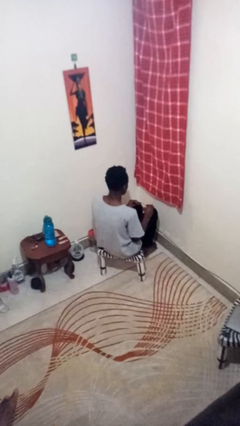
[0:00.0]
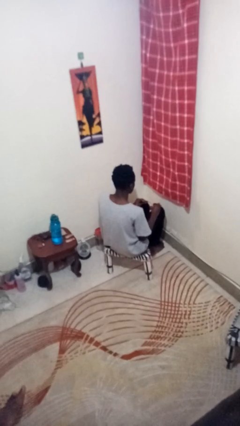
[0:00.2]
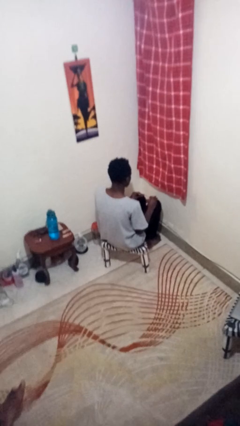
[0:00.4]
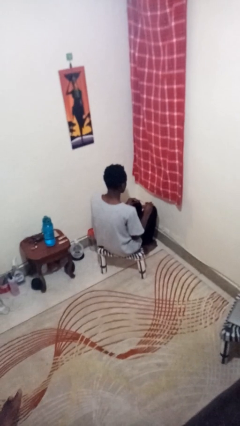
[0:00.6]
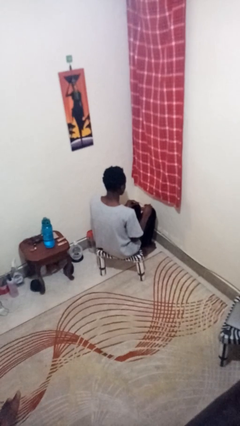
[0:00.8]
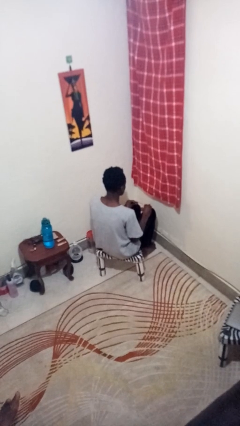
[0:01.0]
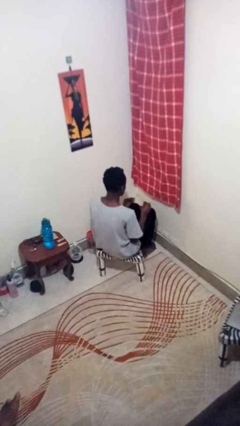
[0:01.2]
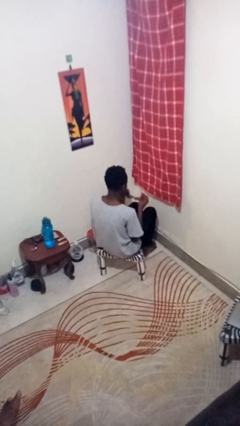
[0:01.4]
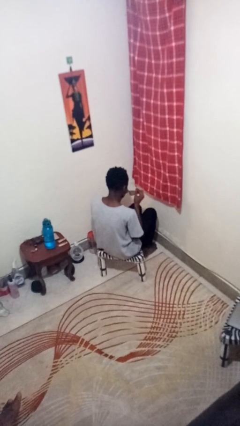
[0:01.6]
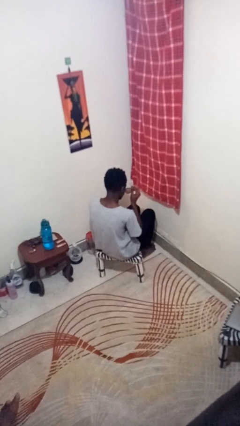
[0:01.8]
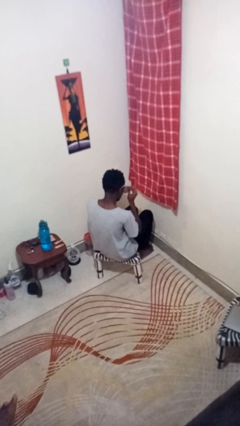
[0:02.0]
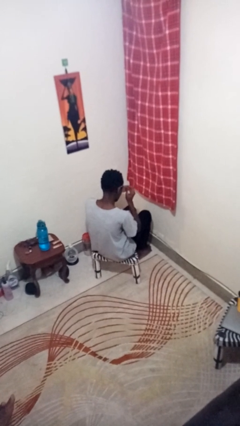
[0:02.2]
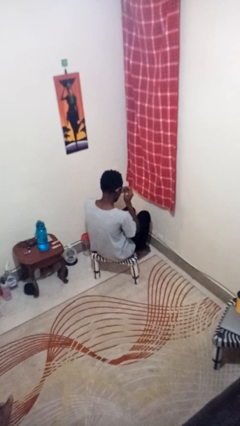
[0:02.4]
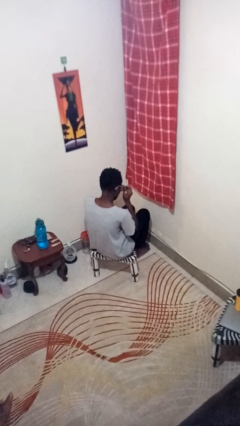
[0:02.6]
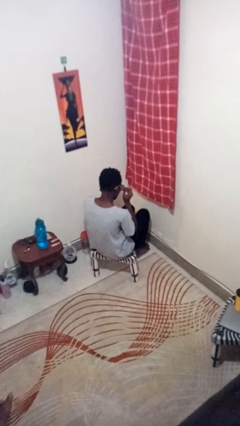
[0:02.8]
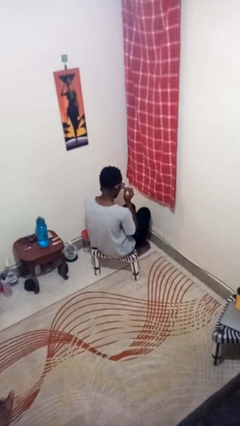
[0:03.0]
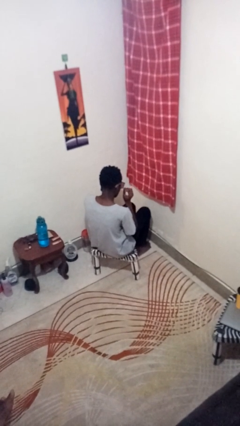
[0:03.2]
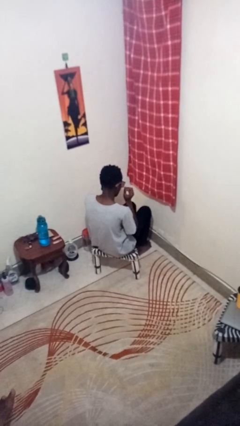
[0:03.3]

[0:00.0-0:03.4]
person puts on glasses

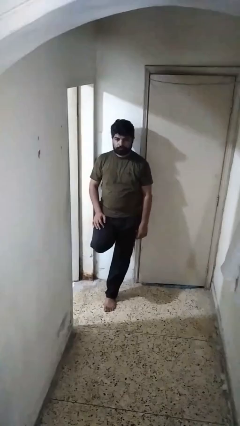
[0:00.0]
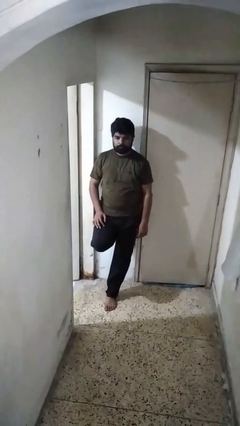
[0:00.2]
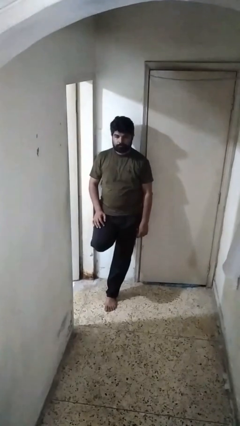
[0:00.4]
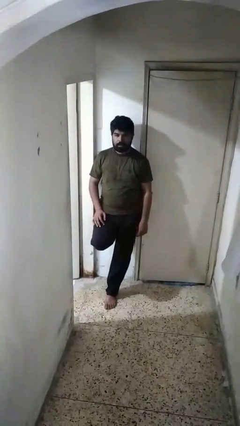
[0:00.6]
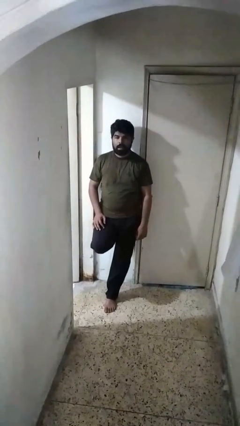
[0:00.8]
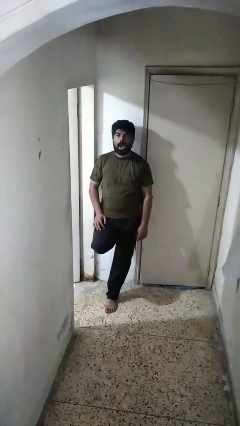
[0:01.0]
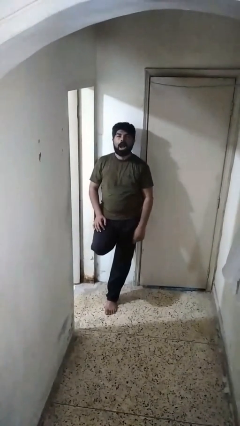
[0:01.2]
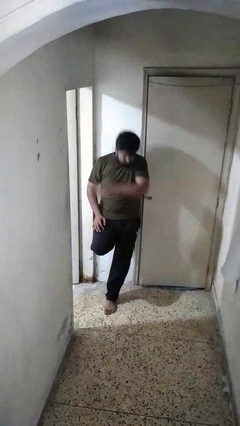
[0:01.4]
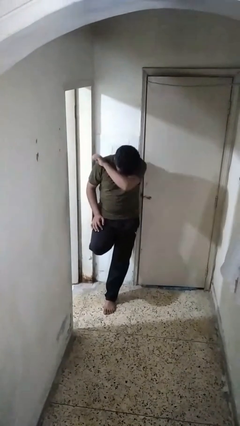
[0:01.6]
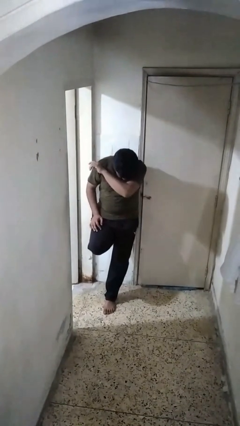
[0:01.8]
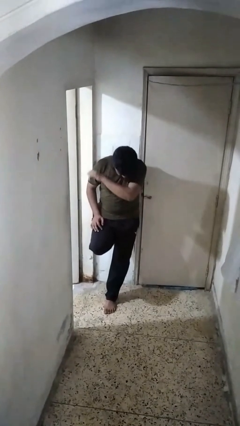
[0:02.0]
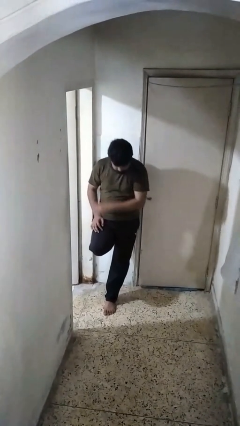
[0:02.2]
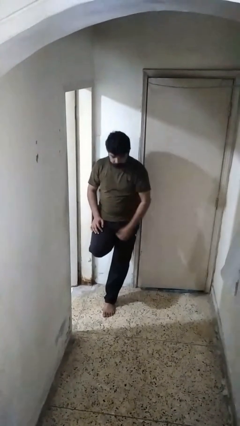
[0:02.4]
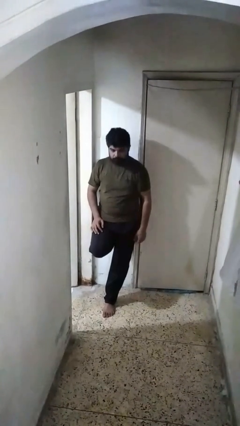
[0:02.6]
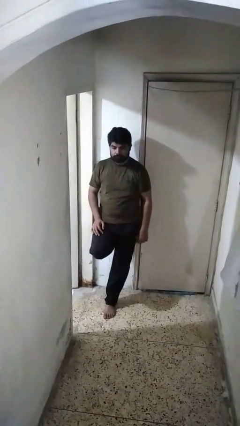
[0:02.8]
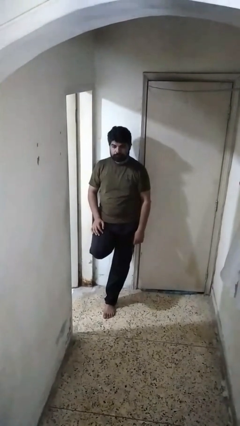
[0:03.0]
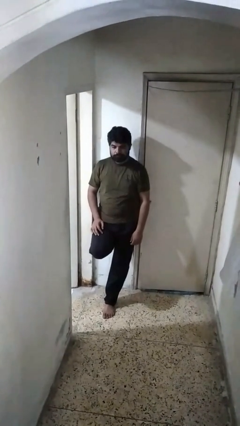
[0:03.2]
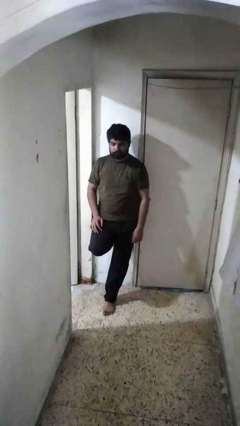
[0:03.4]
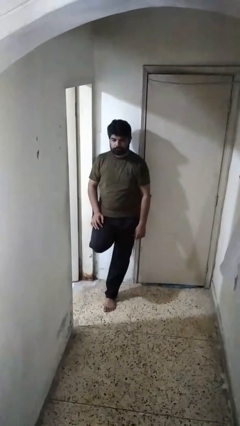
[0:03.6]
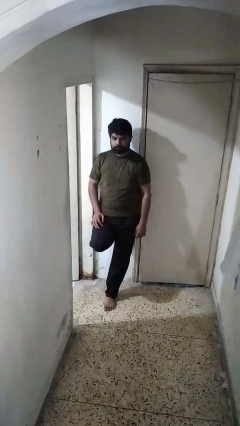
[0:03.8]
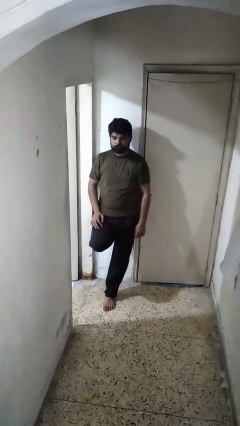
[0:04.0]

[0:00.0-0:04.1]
person sneezes into arm

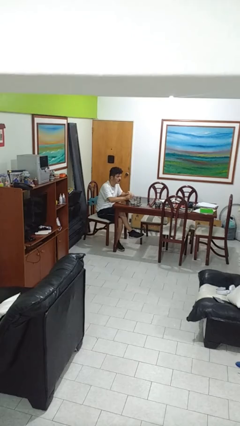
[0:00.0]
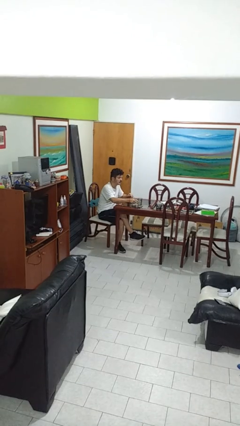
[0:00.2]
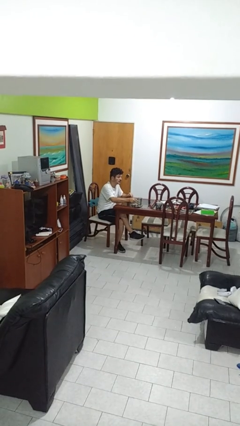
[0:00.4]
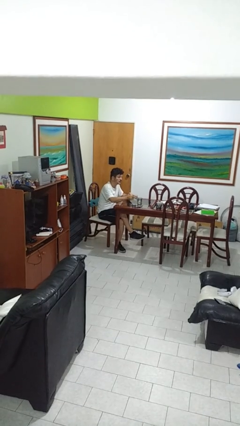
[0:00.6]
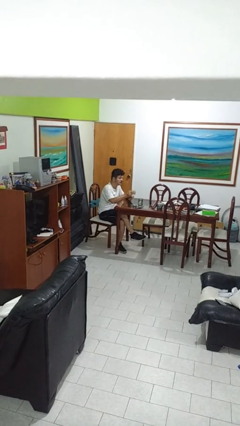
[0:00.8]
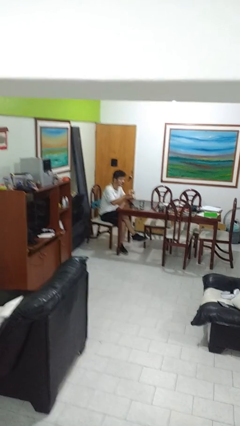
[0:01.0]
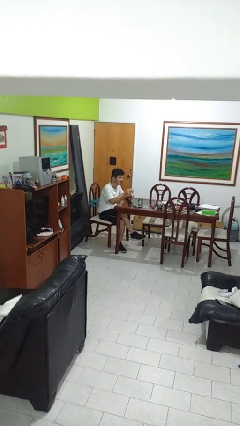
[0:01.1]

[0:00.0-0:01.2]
person picks up object from table

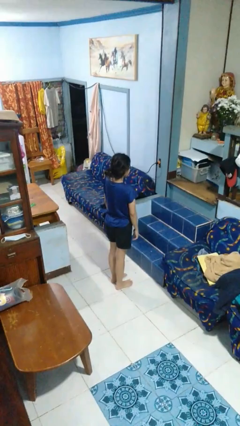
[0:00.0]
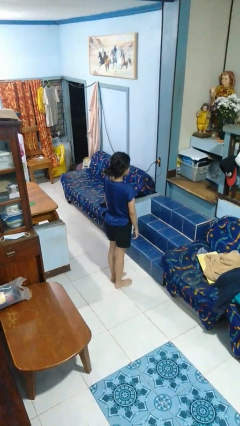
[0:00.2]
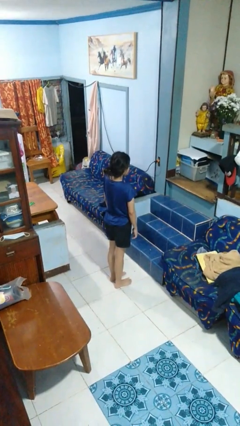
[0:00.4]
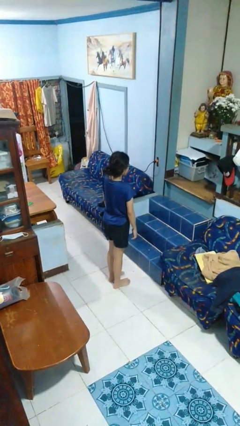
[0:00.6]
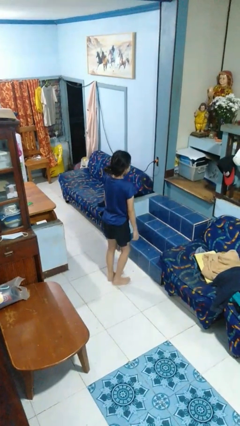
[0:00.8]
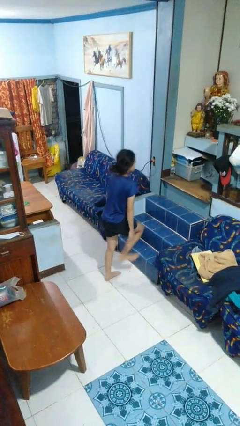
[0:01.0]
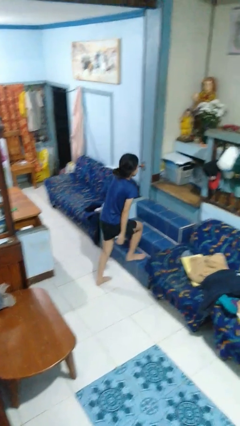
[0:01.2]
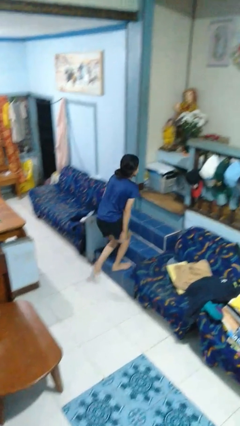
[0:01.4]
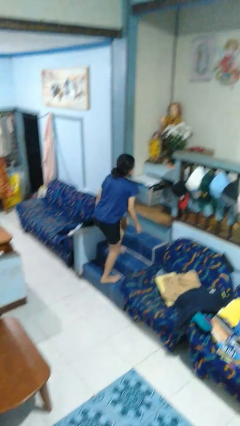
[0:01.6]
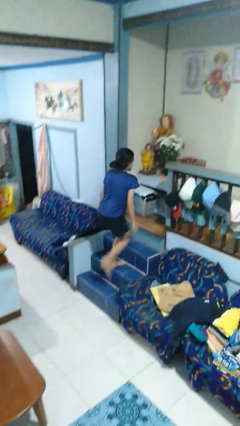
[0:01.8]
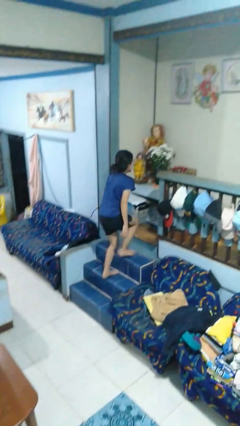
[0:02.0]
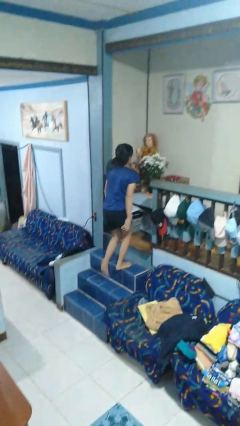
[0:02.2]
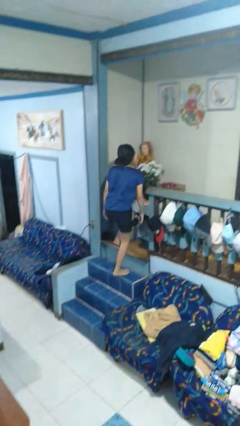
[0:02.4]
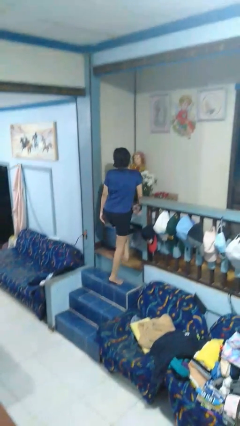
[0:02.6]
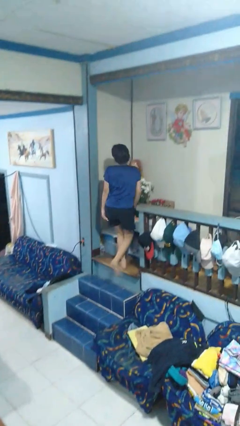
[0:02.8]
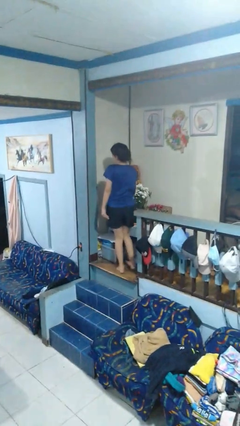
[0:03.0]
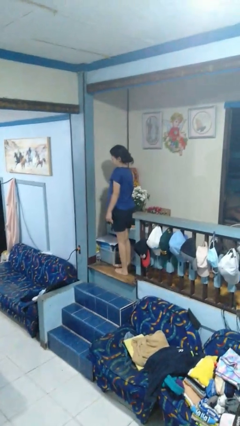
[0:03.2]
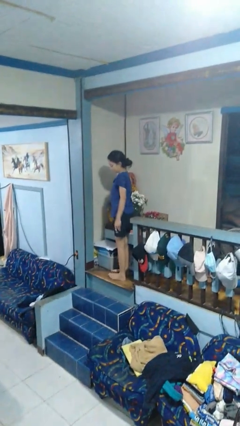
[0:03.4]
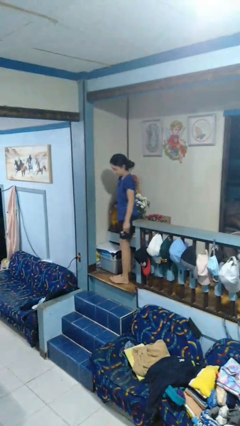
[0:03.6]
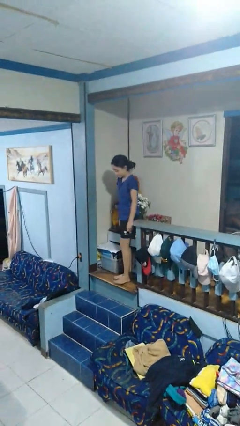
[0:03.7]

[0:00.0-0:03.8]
person climbs up stairs

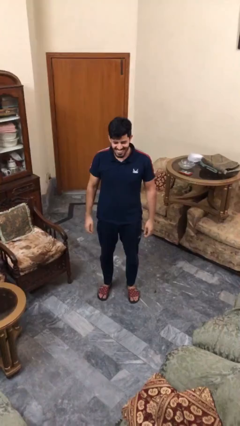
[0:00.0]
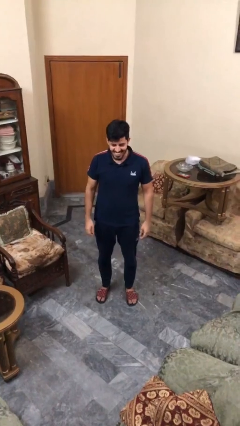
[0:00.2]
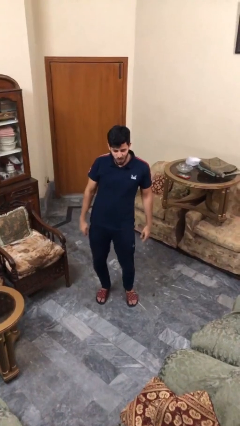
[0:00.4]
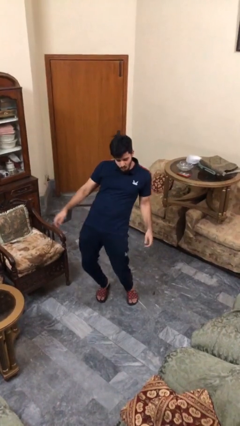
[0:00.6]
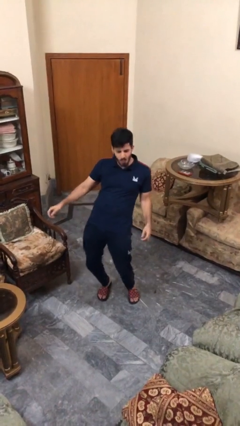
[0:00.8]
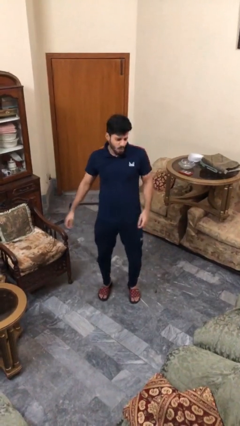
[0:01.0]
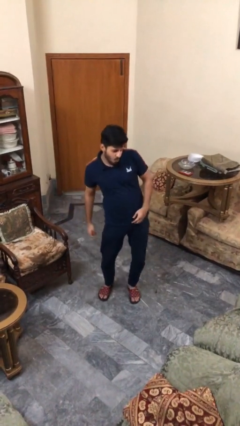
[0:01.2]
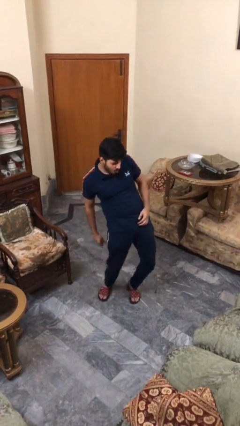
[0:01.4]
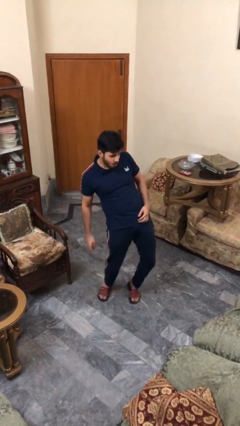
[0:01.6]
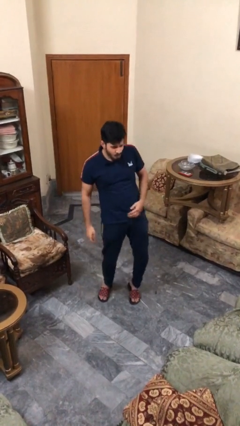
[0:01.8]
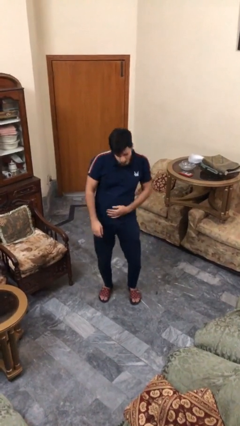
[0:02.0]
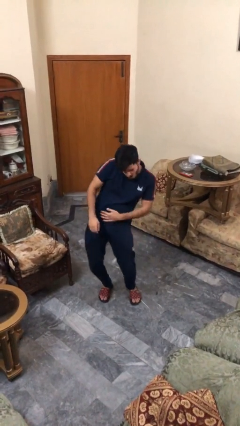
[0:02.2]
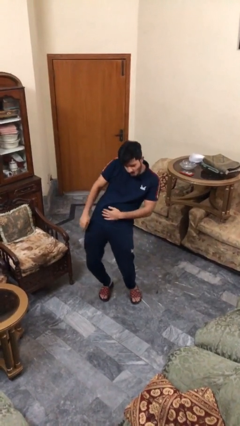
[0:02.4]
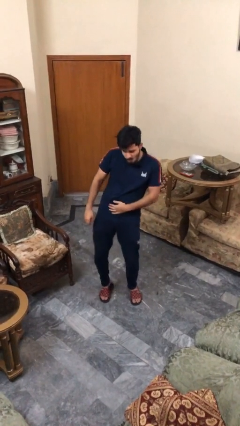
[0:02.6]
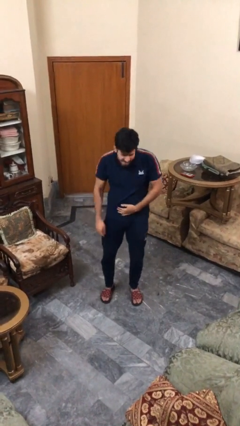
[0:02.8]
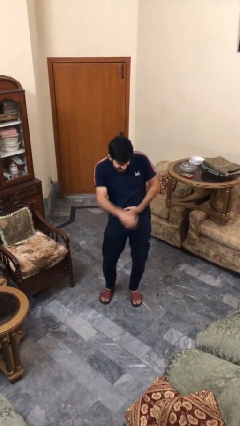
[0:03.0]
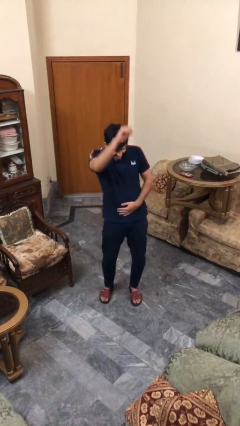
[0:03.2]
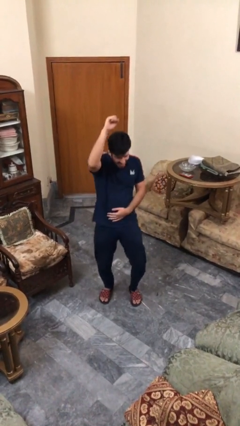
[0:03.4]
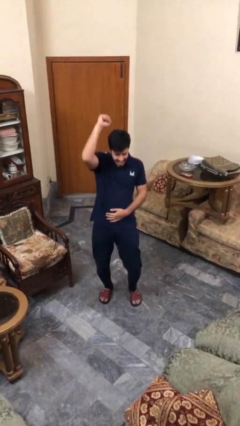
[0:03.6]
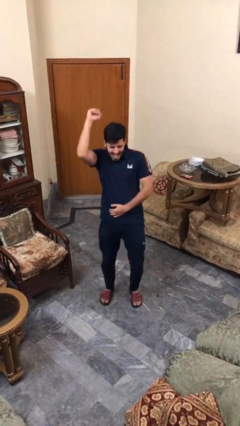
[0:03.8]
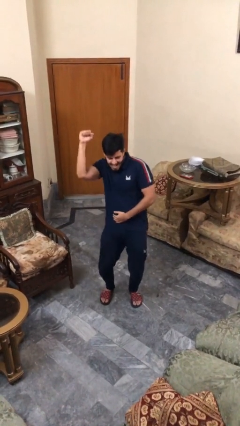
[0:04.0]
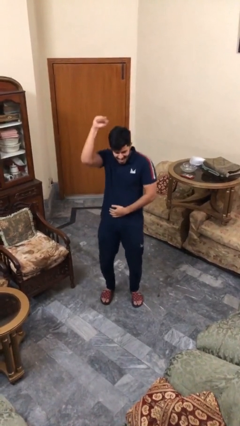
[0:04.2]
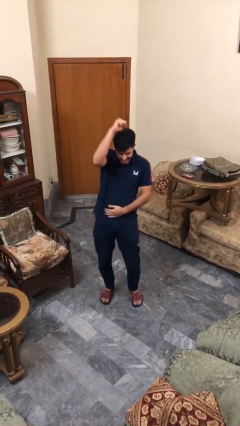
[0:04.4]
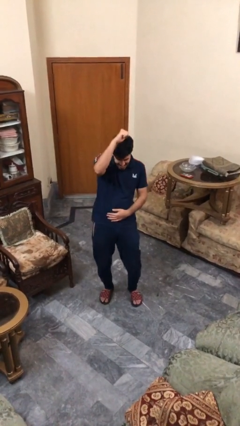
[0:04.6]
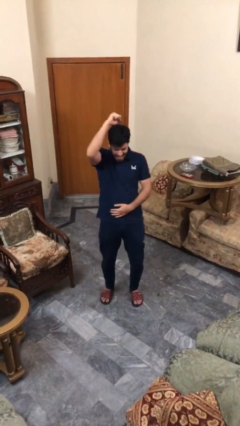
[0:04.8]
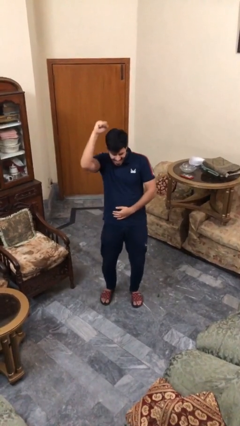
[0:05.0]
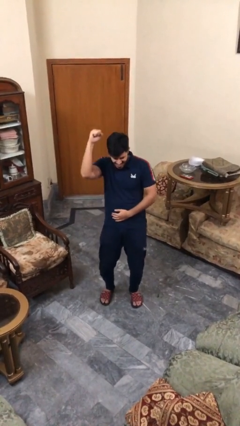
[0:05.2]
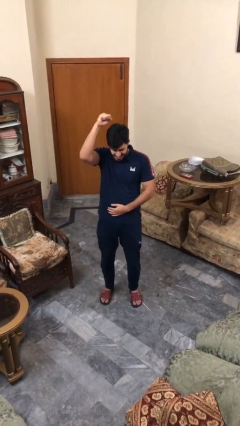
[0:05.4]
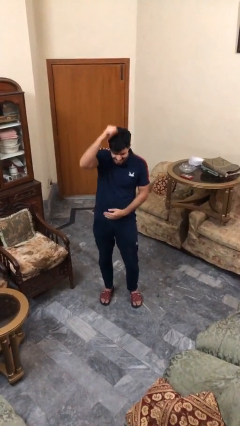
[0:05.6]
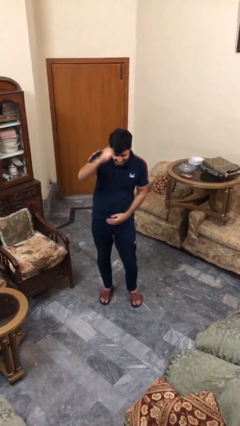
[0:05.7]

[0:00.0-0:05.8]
person dances in place
